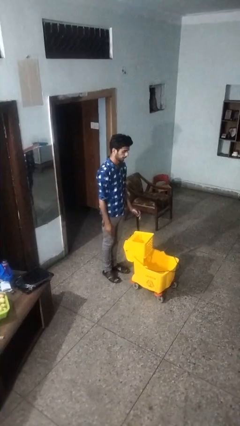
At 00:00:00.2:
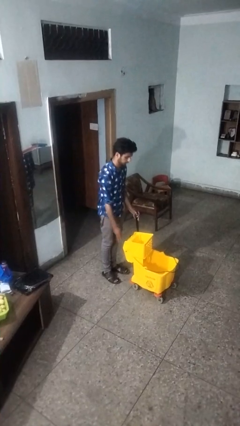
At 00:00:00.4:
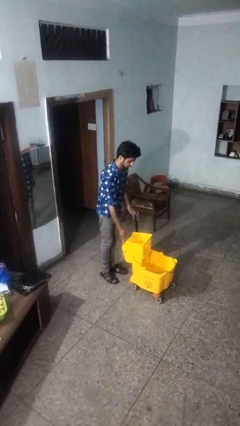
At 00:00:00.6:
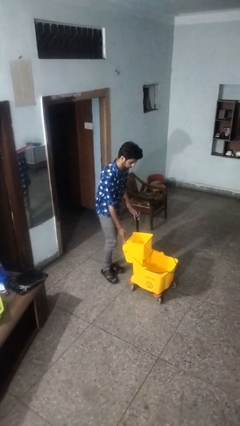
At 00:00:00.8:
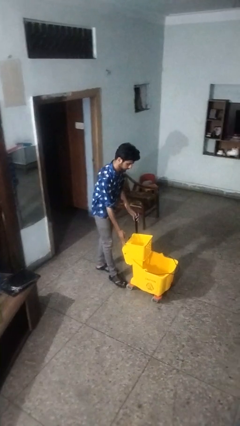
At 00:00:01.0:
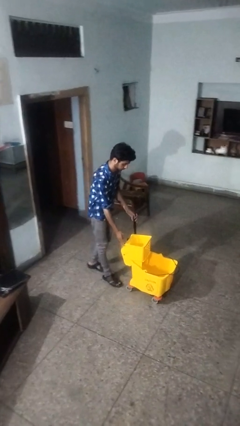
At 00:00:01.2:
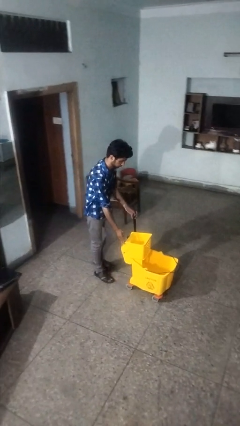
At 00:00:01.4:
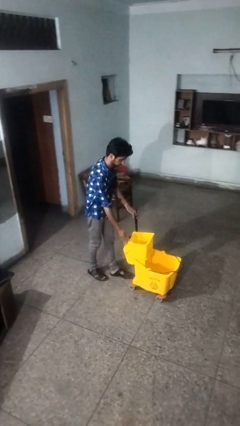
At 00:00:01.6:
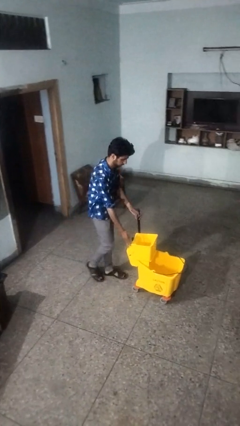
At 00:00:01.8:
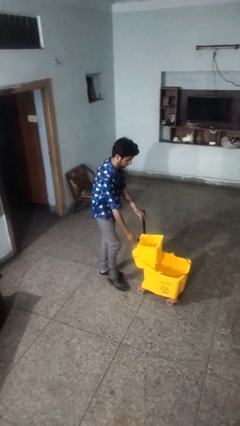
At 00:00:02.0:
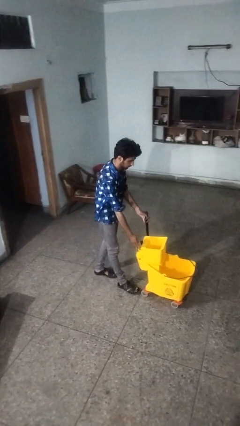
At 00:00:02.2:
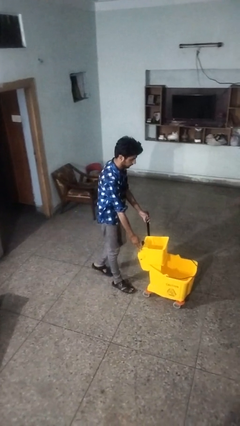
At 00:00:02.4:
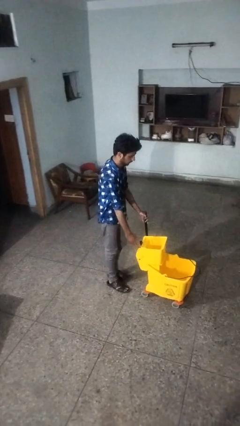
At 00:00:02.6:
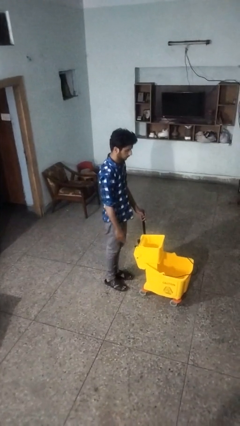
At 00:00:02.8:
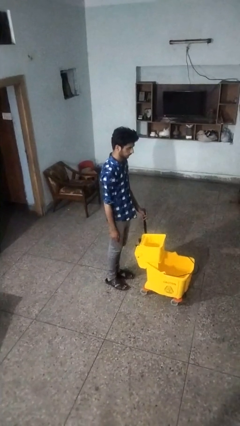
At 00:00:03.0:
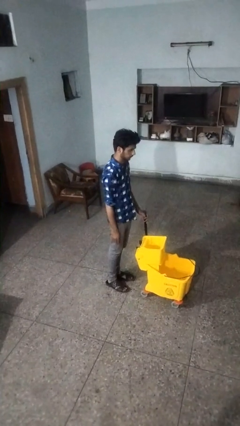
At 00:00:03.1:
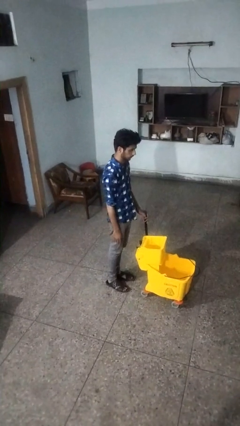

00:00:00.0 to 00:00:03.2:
person pushes wheeled cart

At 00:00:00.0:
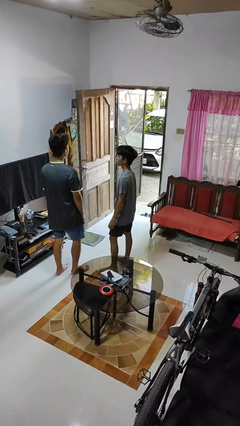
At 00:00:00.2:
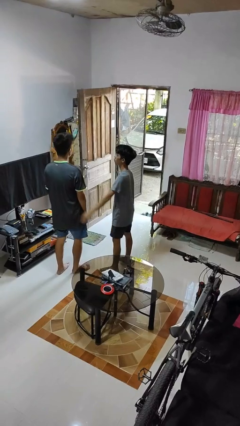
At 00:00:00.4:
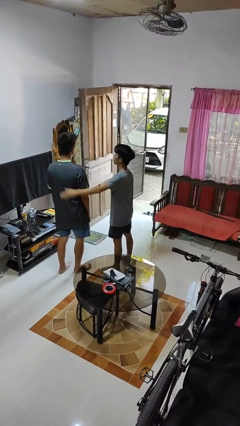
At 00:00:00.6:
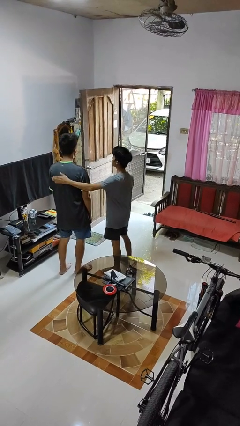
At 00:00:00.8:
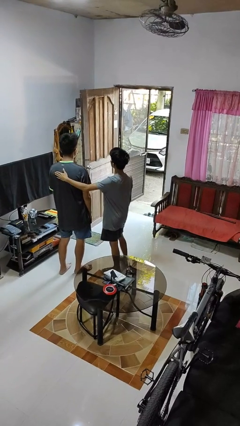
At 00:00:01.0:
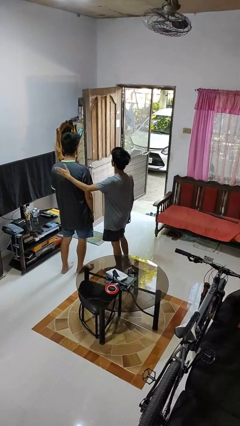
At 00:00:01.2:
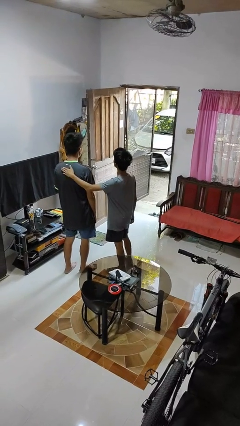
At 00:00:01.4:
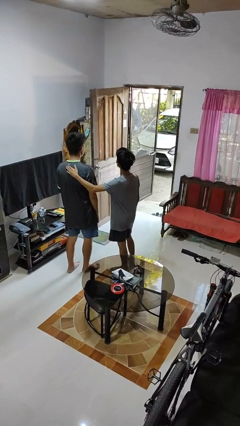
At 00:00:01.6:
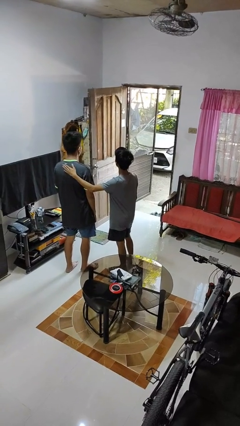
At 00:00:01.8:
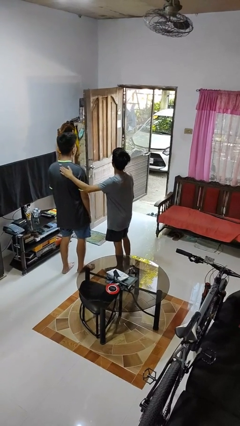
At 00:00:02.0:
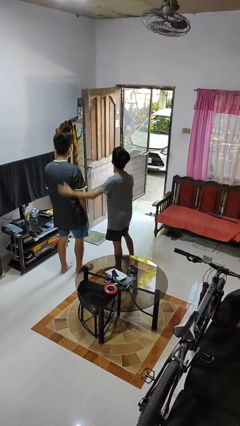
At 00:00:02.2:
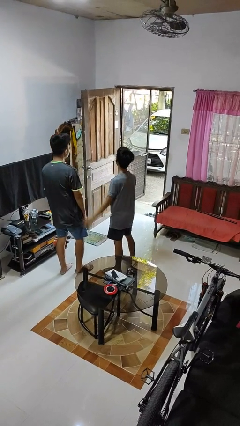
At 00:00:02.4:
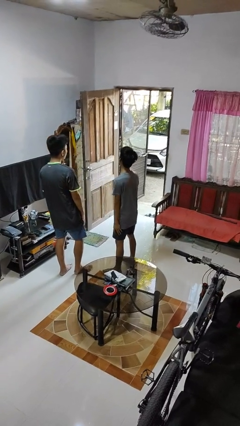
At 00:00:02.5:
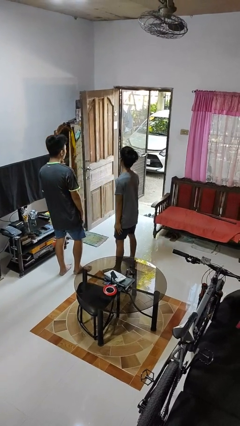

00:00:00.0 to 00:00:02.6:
person touches back of person

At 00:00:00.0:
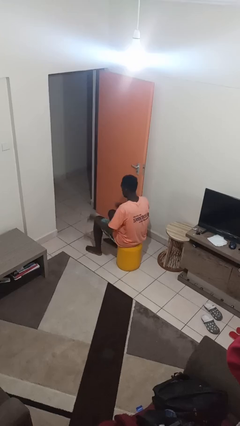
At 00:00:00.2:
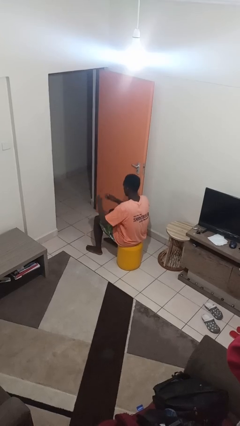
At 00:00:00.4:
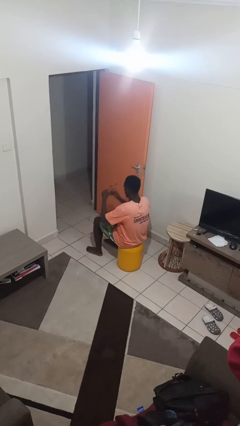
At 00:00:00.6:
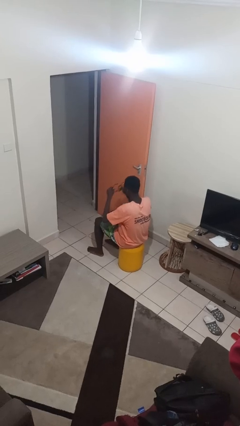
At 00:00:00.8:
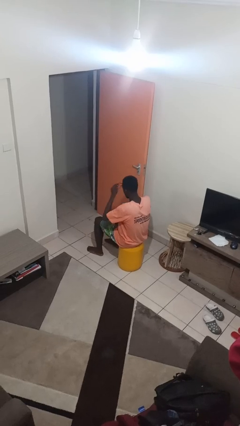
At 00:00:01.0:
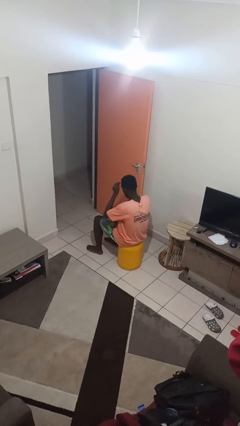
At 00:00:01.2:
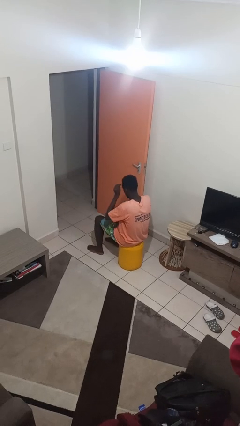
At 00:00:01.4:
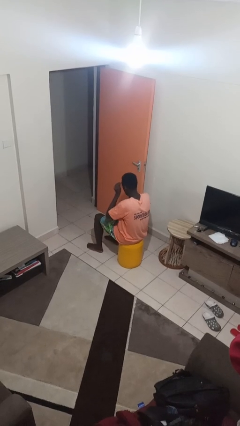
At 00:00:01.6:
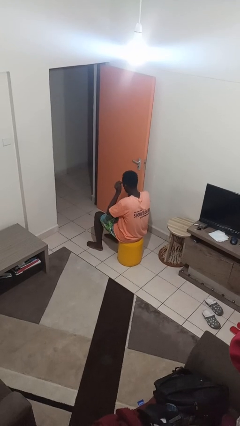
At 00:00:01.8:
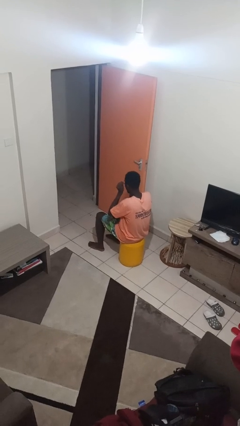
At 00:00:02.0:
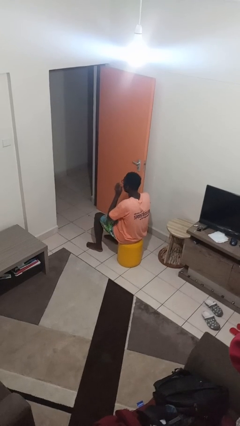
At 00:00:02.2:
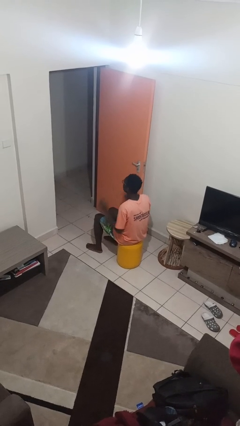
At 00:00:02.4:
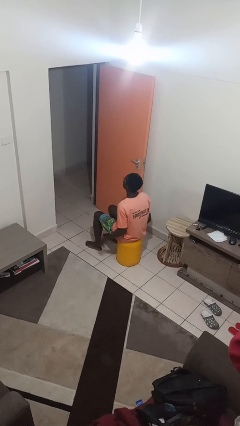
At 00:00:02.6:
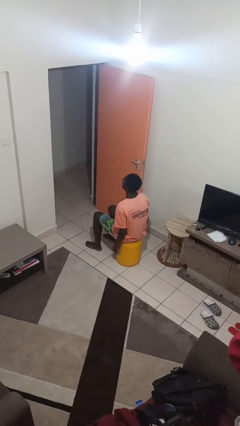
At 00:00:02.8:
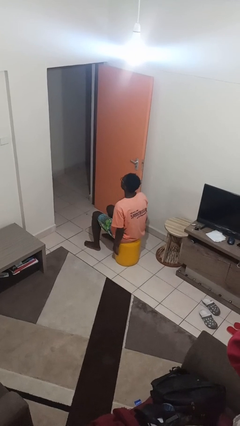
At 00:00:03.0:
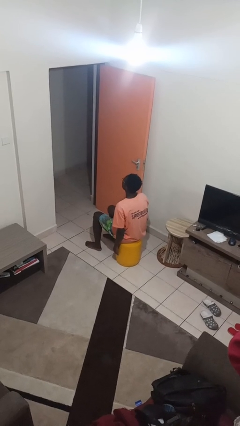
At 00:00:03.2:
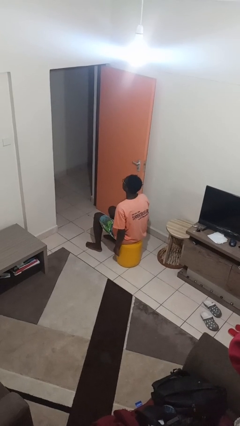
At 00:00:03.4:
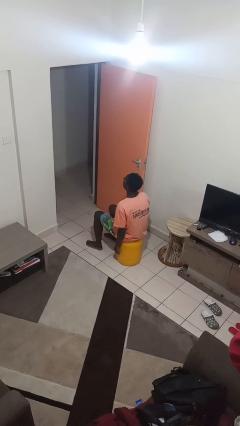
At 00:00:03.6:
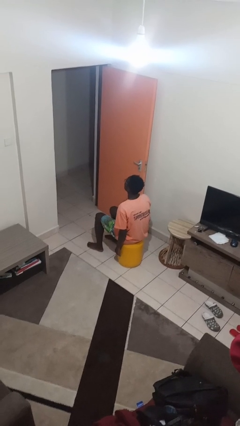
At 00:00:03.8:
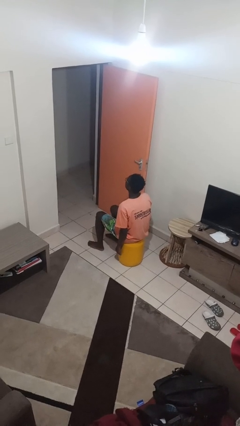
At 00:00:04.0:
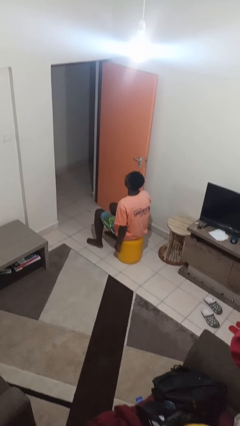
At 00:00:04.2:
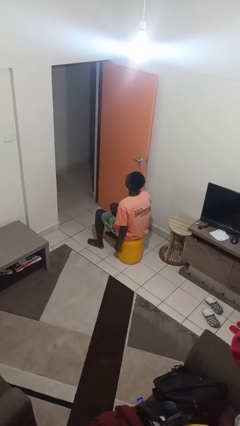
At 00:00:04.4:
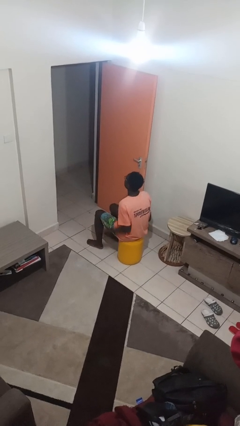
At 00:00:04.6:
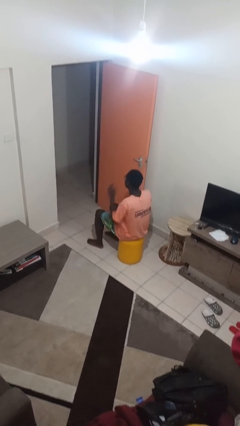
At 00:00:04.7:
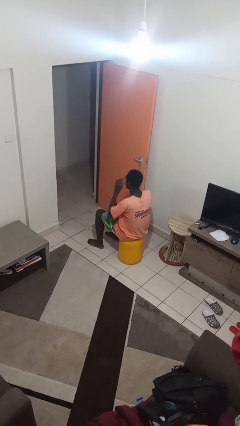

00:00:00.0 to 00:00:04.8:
person puts on glasses

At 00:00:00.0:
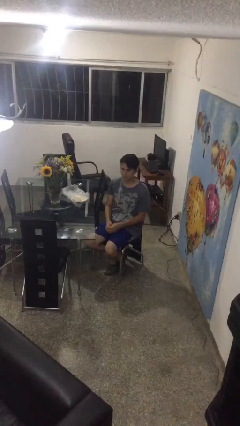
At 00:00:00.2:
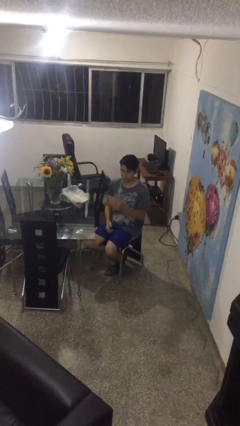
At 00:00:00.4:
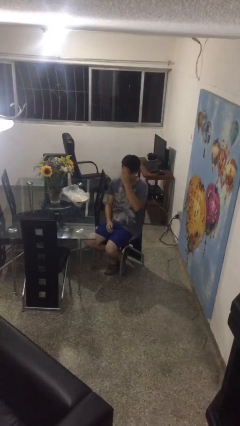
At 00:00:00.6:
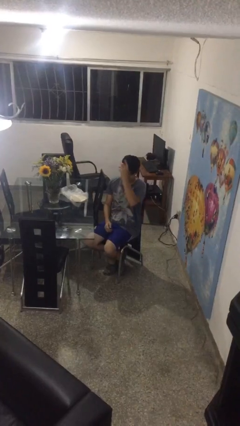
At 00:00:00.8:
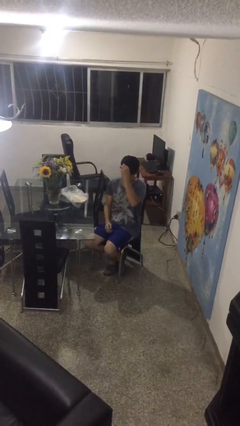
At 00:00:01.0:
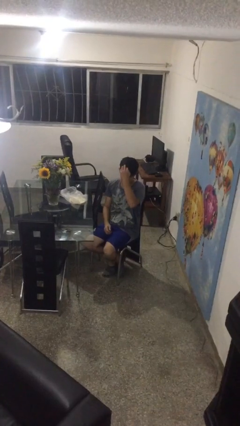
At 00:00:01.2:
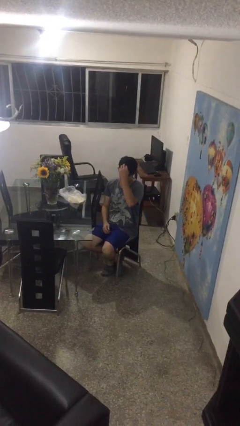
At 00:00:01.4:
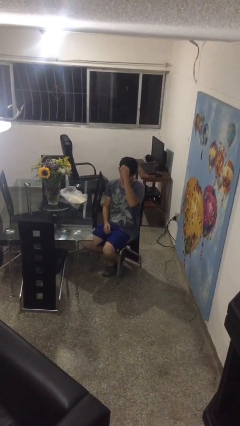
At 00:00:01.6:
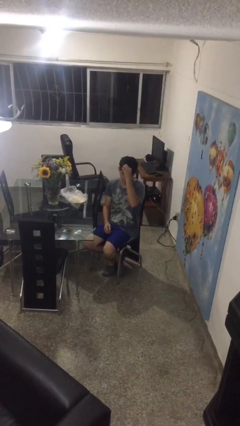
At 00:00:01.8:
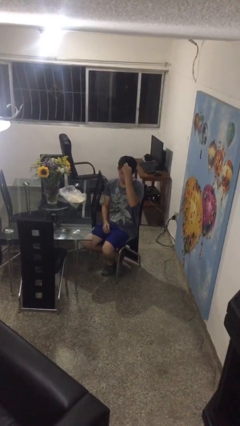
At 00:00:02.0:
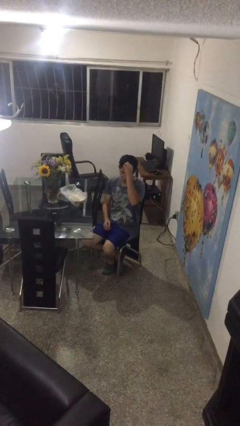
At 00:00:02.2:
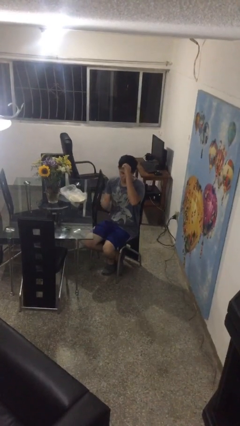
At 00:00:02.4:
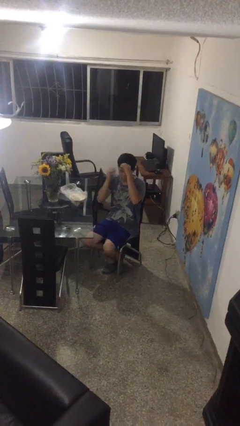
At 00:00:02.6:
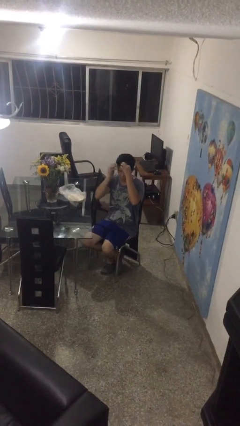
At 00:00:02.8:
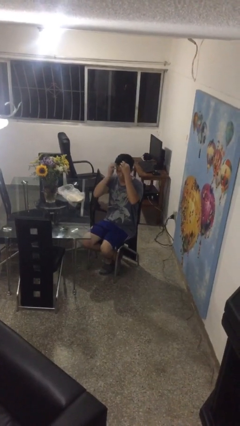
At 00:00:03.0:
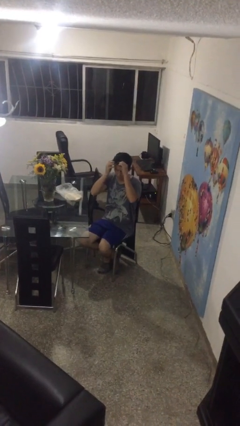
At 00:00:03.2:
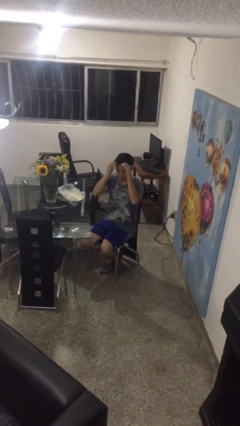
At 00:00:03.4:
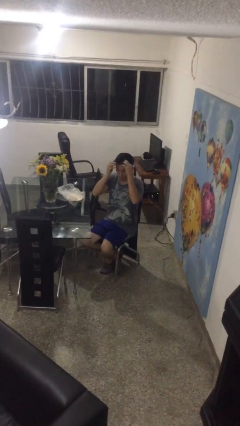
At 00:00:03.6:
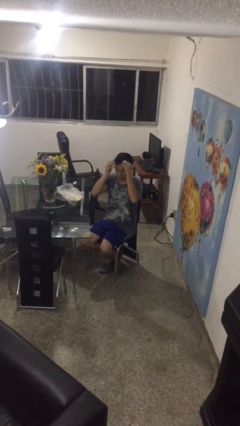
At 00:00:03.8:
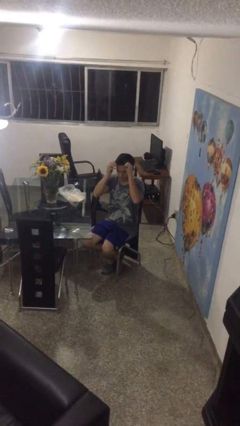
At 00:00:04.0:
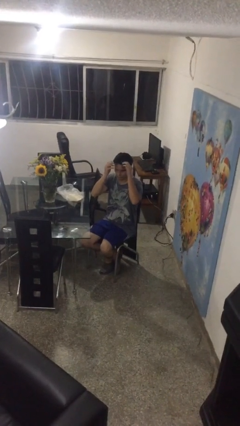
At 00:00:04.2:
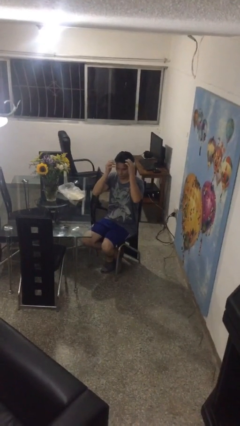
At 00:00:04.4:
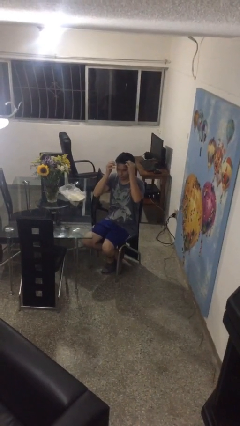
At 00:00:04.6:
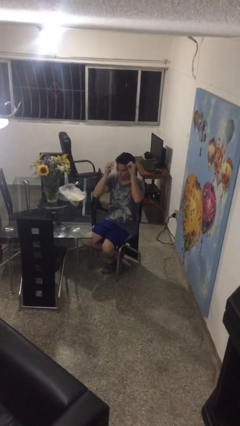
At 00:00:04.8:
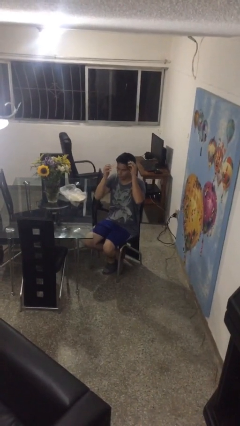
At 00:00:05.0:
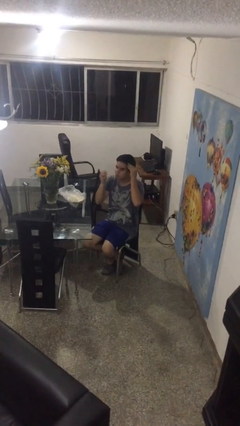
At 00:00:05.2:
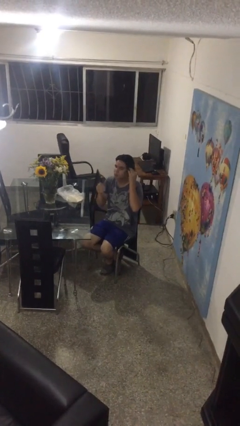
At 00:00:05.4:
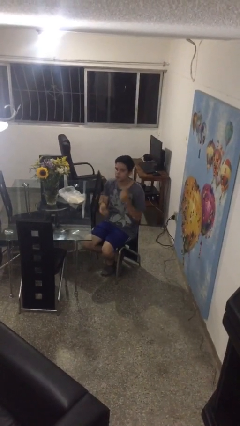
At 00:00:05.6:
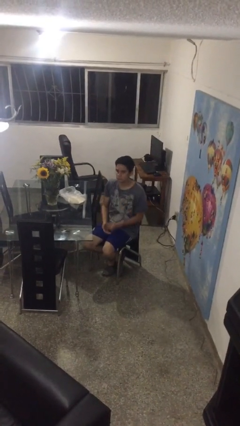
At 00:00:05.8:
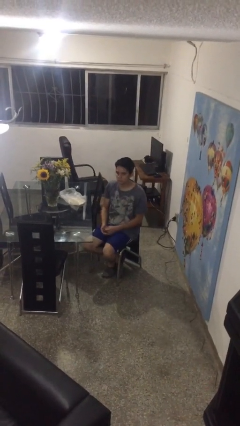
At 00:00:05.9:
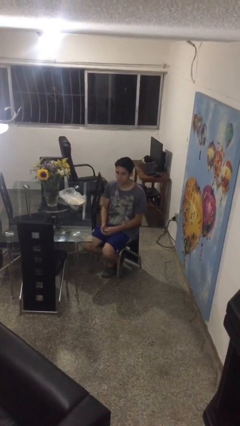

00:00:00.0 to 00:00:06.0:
person strokes hair

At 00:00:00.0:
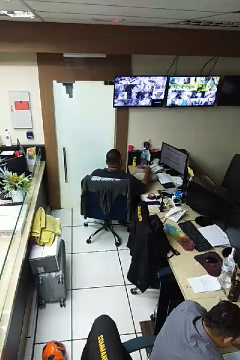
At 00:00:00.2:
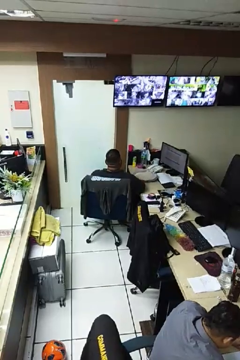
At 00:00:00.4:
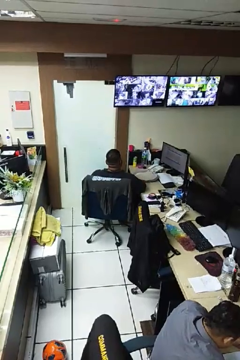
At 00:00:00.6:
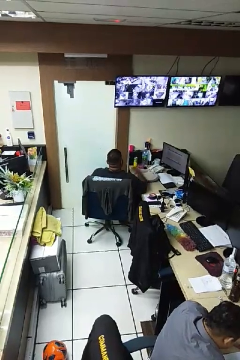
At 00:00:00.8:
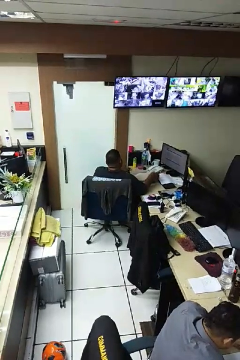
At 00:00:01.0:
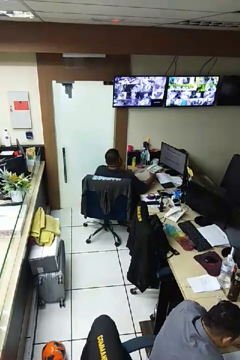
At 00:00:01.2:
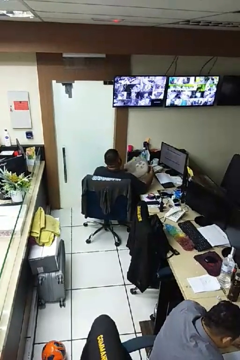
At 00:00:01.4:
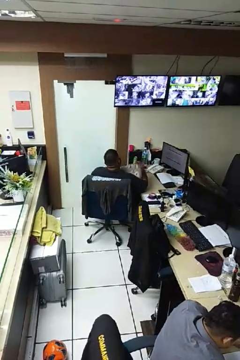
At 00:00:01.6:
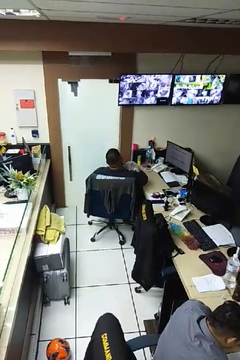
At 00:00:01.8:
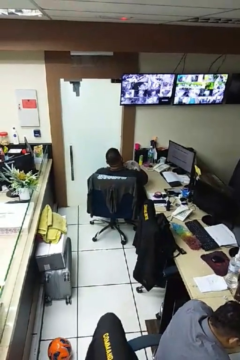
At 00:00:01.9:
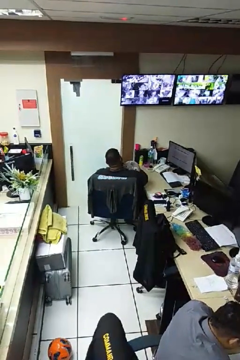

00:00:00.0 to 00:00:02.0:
person hugs stuffed animal
